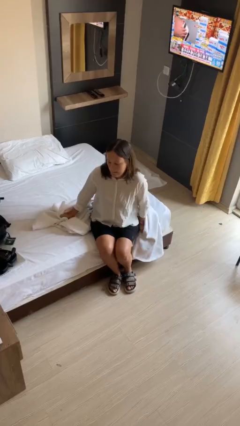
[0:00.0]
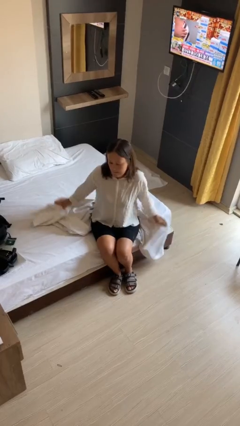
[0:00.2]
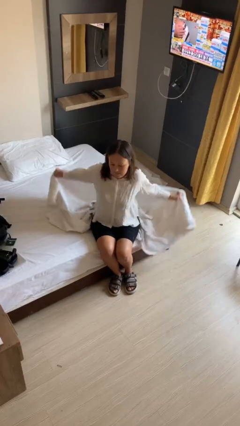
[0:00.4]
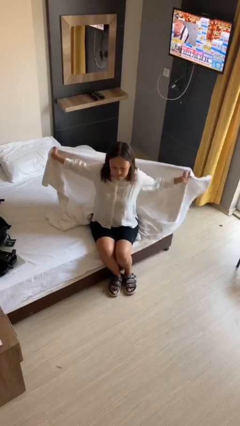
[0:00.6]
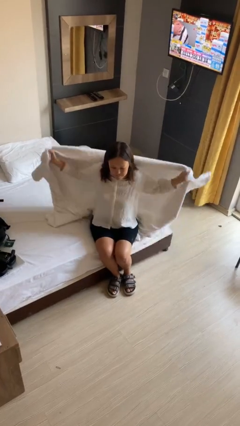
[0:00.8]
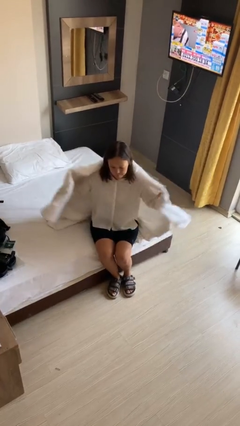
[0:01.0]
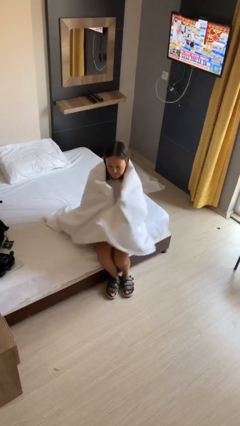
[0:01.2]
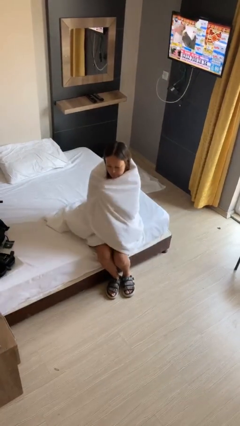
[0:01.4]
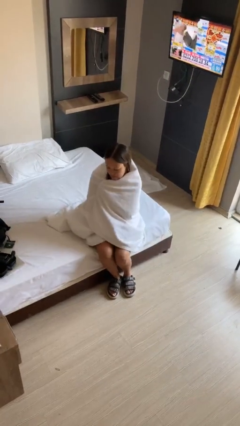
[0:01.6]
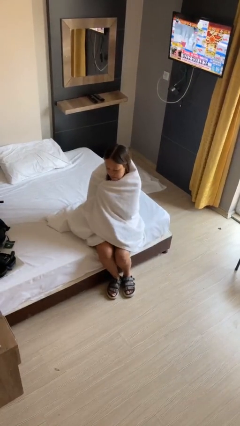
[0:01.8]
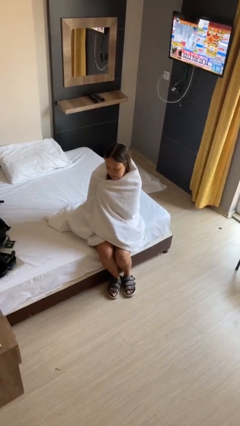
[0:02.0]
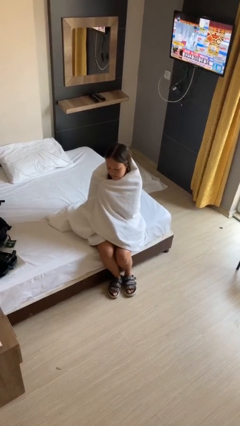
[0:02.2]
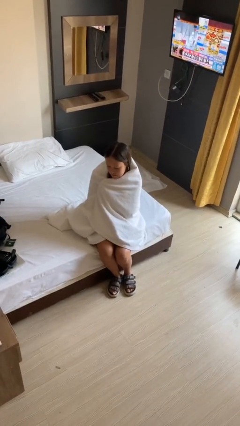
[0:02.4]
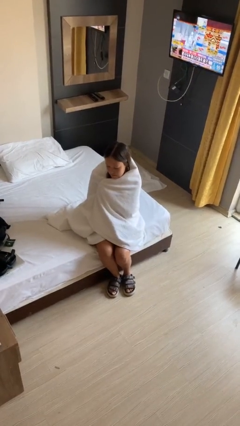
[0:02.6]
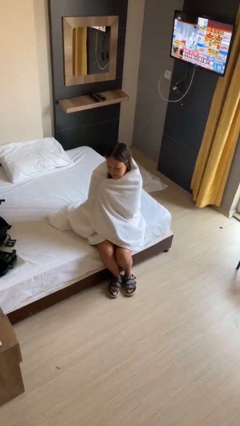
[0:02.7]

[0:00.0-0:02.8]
person covers with blanket

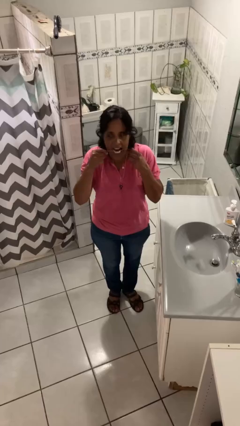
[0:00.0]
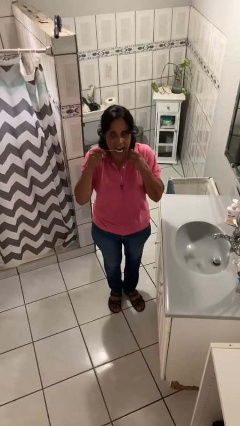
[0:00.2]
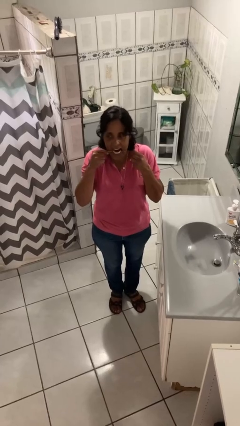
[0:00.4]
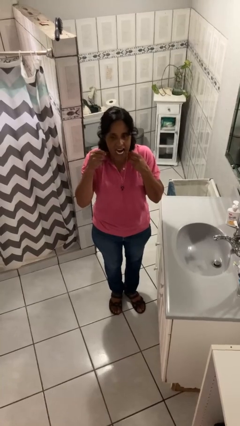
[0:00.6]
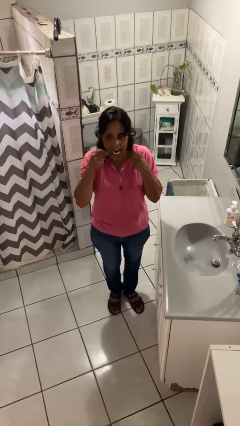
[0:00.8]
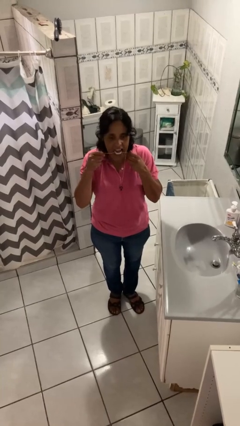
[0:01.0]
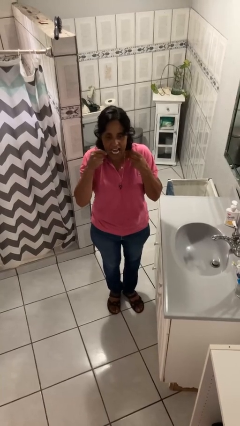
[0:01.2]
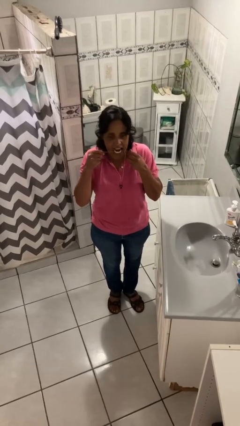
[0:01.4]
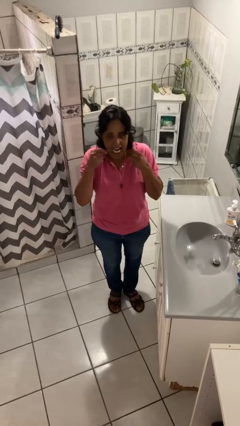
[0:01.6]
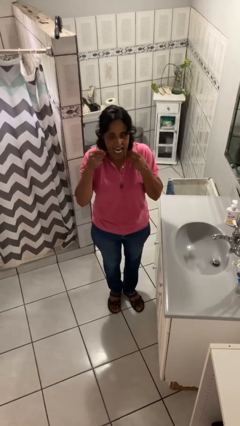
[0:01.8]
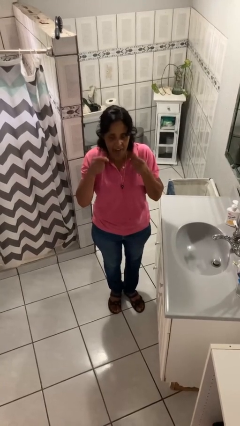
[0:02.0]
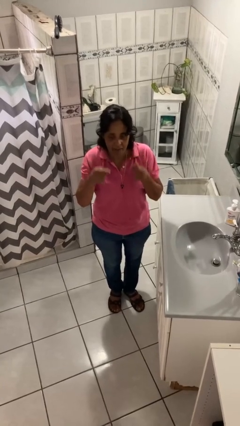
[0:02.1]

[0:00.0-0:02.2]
person flosses

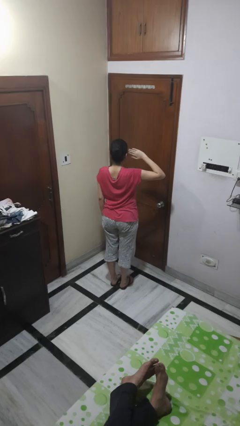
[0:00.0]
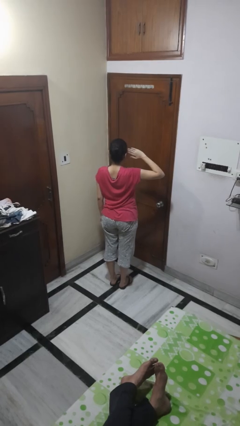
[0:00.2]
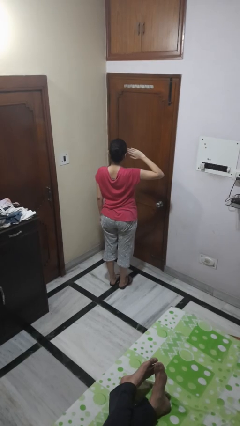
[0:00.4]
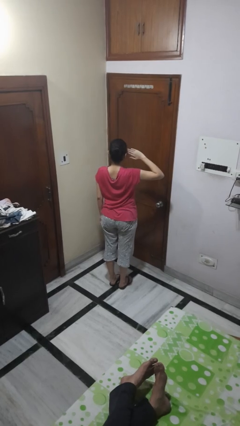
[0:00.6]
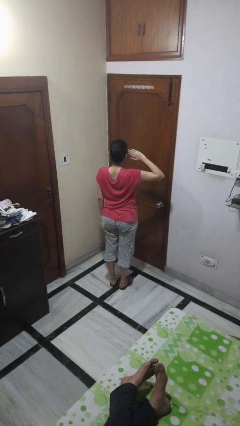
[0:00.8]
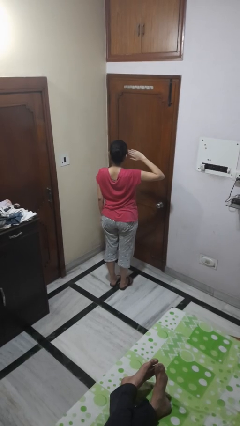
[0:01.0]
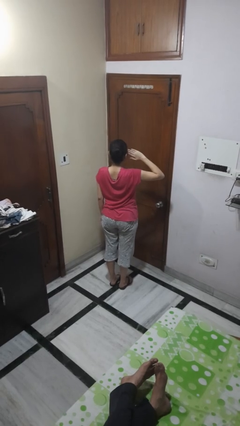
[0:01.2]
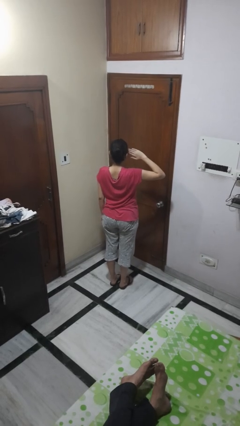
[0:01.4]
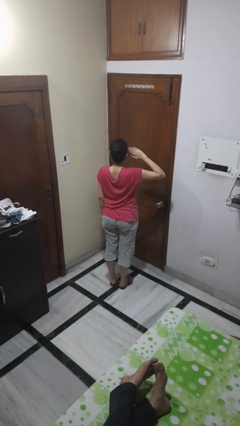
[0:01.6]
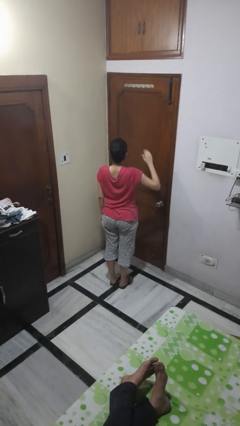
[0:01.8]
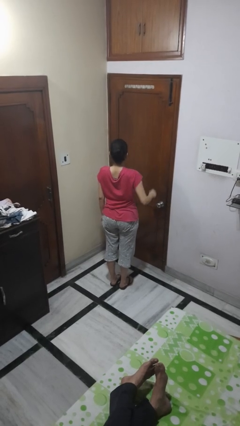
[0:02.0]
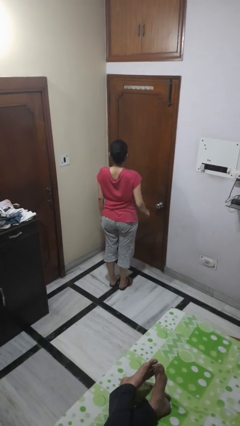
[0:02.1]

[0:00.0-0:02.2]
person salutes

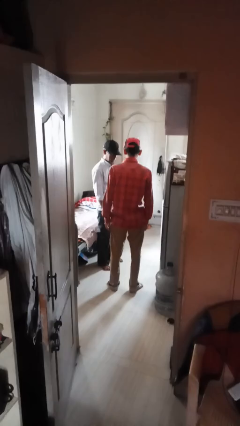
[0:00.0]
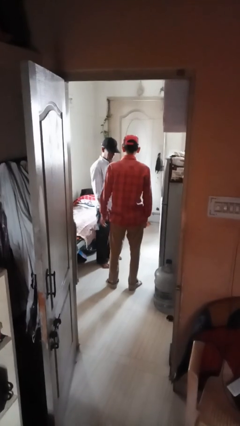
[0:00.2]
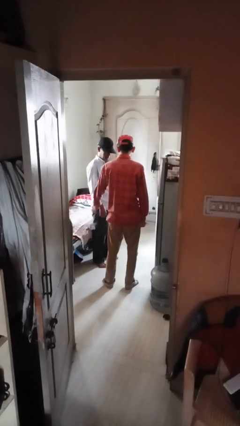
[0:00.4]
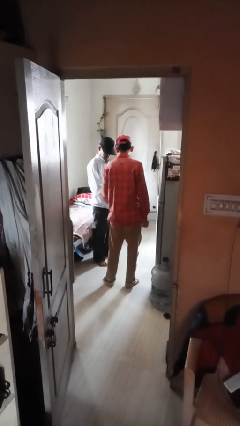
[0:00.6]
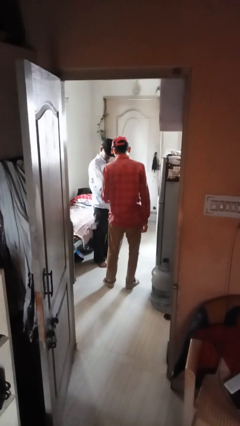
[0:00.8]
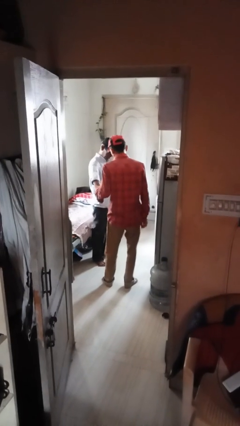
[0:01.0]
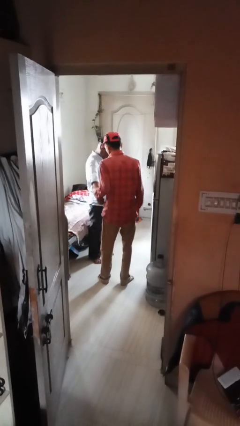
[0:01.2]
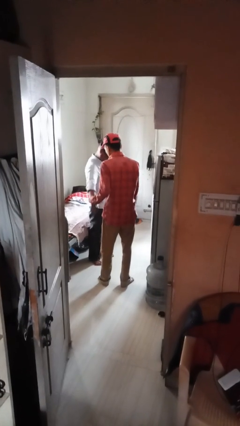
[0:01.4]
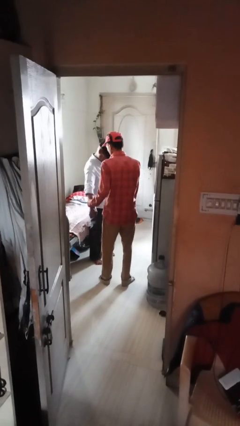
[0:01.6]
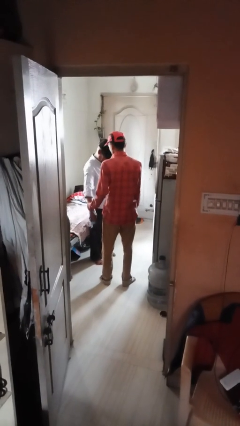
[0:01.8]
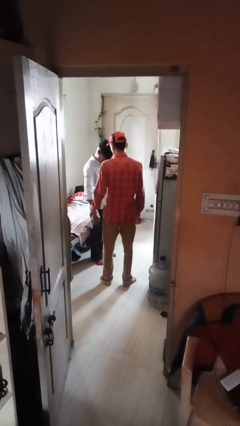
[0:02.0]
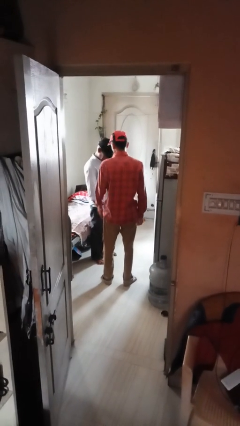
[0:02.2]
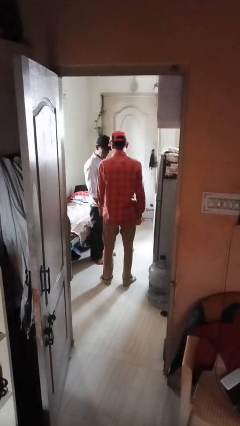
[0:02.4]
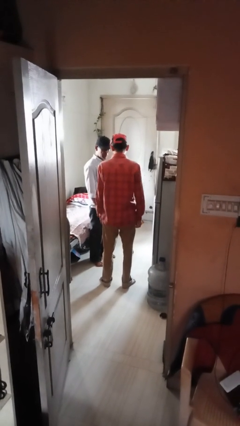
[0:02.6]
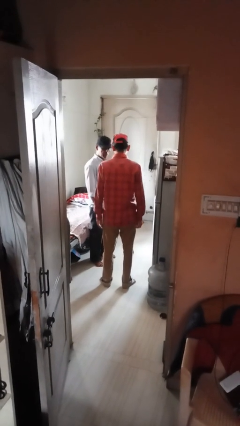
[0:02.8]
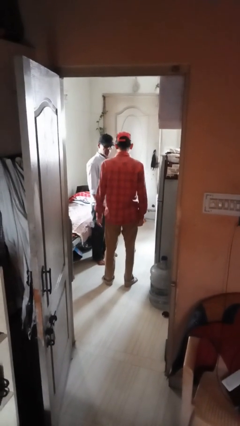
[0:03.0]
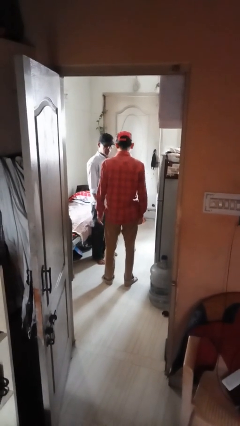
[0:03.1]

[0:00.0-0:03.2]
person grabs person by forearm

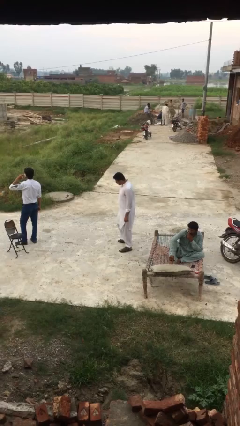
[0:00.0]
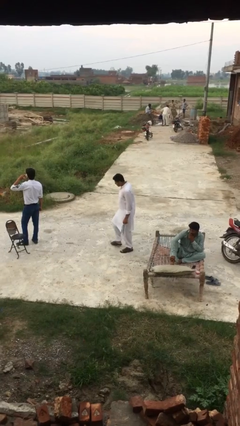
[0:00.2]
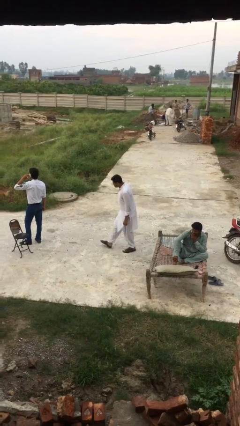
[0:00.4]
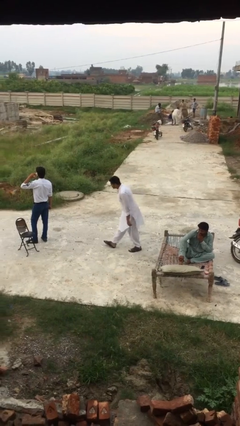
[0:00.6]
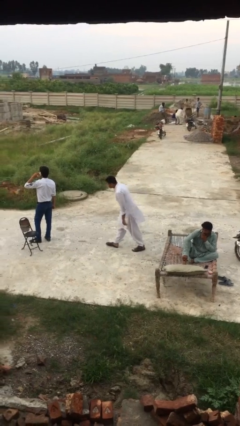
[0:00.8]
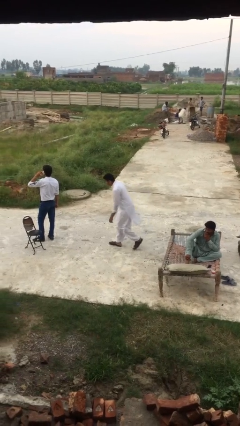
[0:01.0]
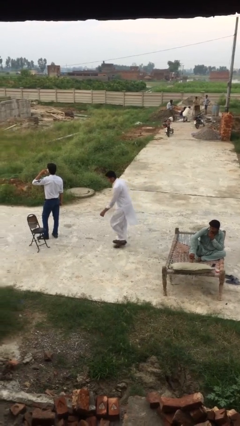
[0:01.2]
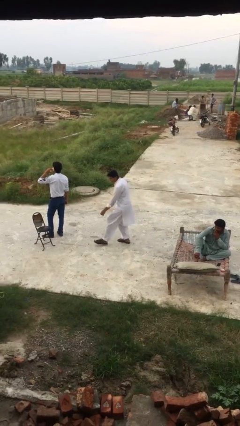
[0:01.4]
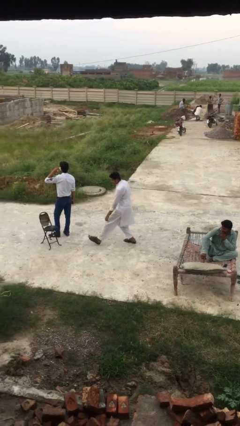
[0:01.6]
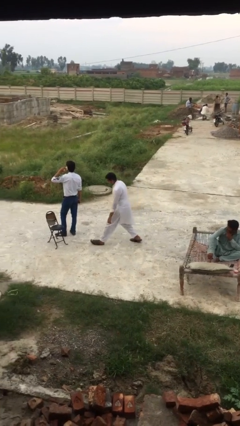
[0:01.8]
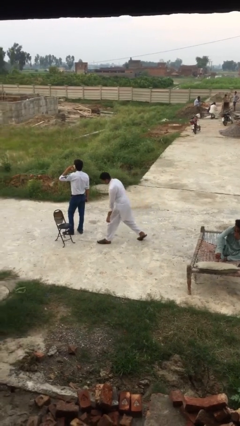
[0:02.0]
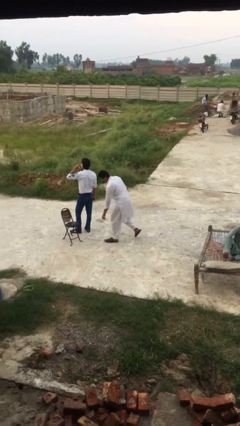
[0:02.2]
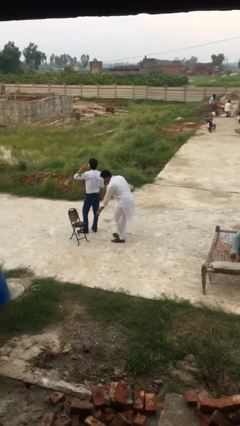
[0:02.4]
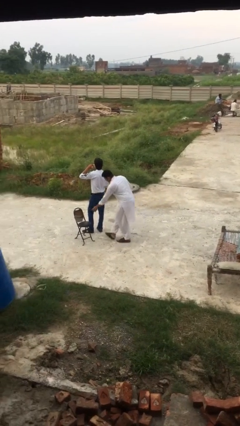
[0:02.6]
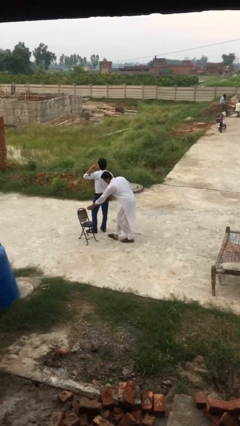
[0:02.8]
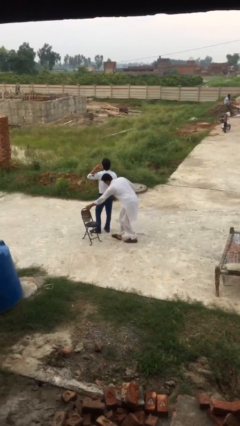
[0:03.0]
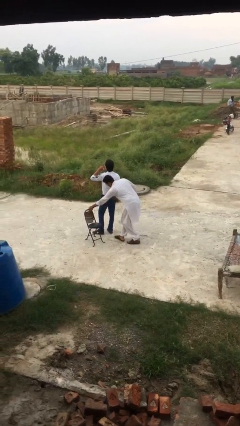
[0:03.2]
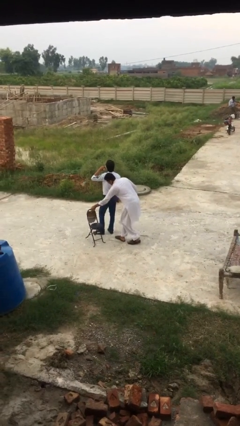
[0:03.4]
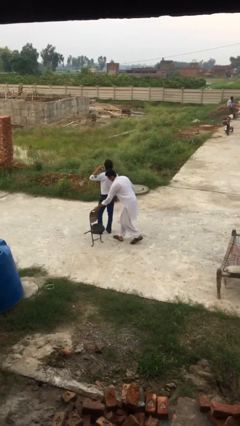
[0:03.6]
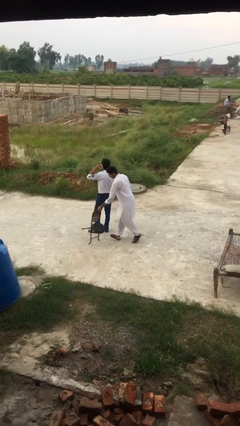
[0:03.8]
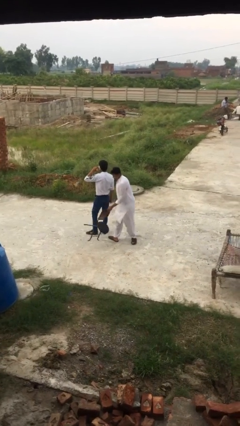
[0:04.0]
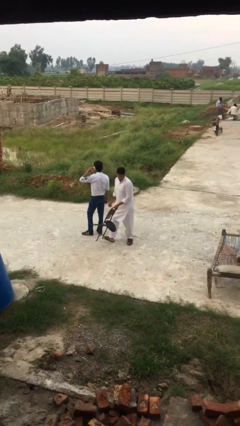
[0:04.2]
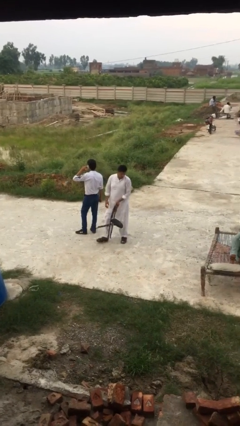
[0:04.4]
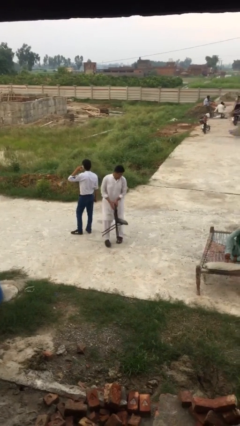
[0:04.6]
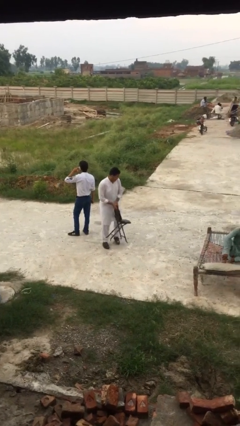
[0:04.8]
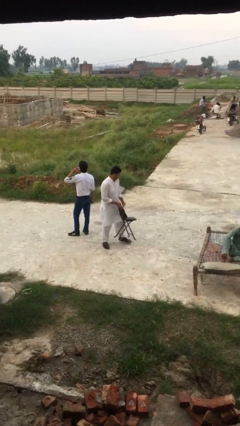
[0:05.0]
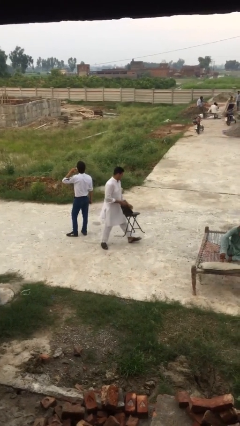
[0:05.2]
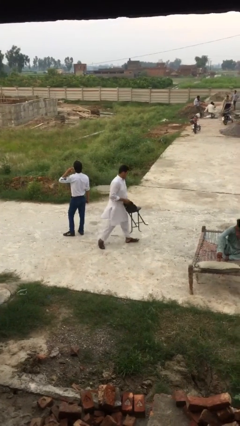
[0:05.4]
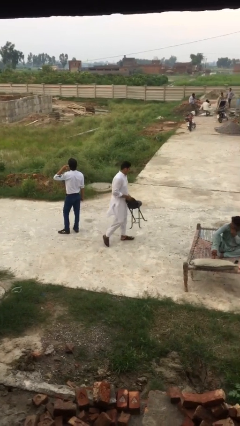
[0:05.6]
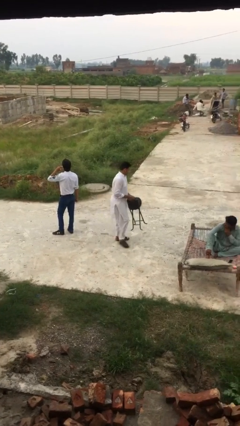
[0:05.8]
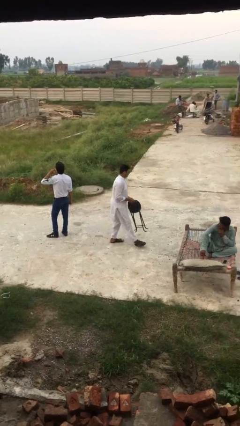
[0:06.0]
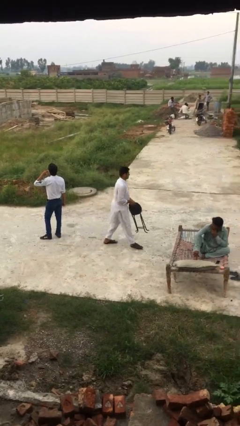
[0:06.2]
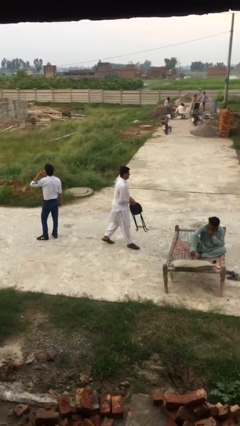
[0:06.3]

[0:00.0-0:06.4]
person steals object from person

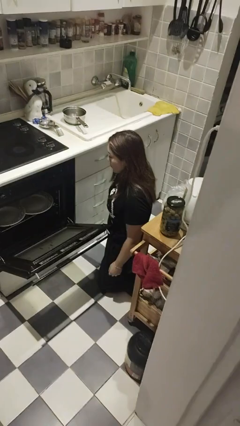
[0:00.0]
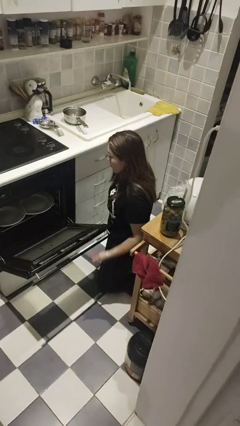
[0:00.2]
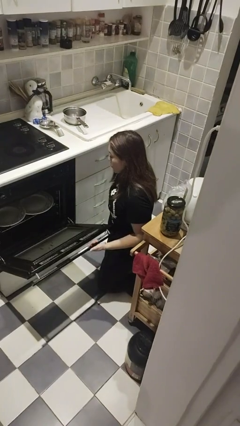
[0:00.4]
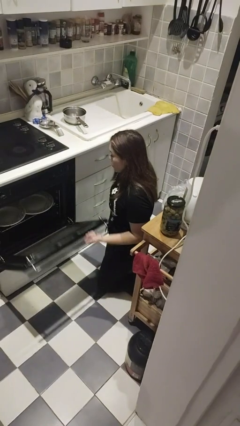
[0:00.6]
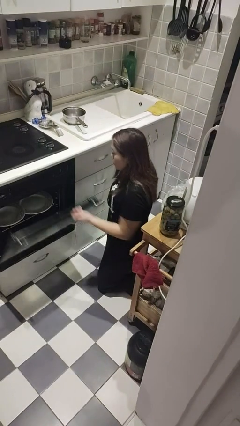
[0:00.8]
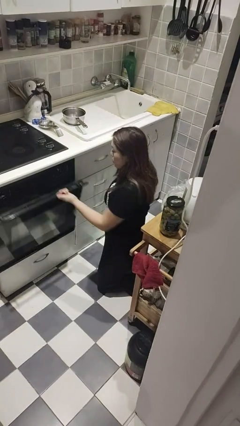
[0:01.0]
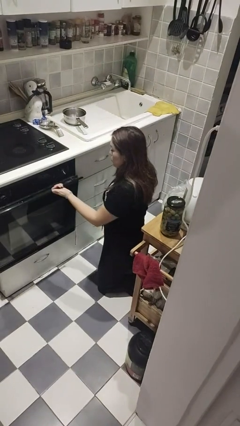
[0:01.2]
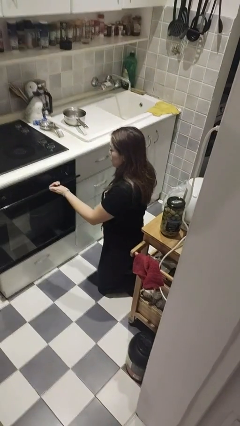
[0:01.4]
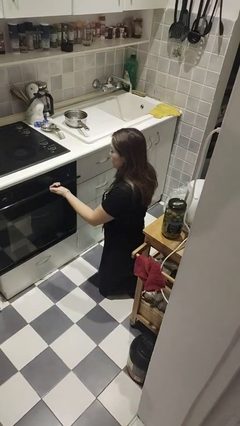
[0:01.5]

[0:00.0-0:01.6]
person closes dishwasher
